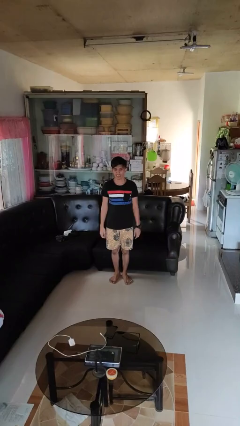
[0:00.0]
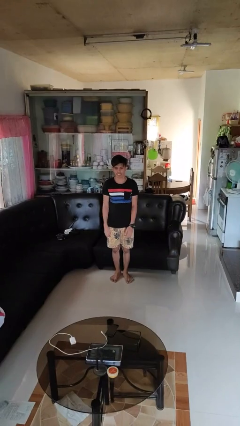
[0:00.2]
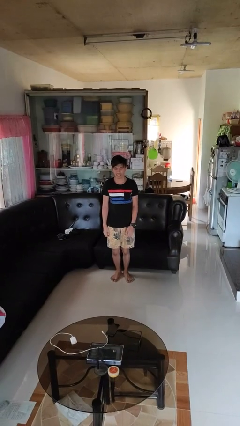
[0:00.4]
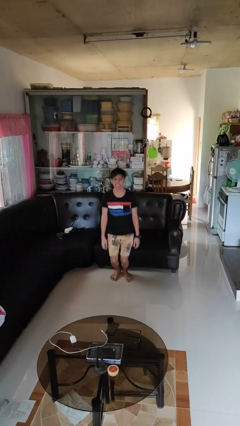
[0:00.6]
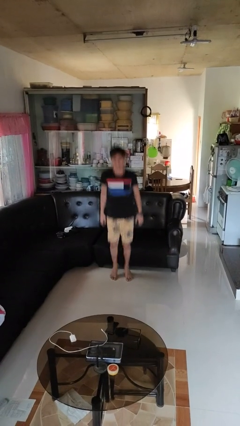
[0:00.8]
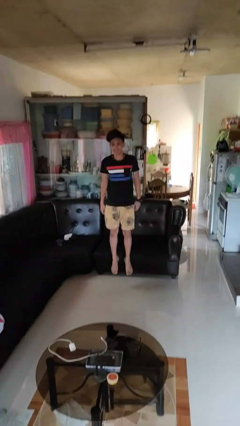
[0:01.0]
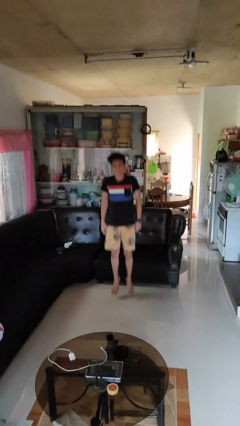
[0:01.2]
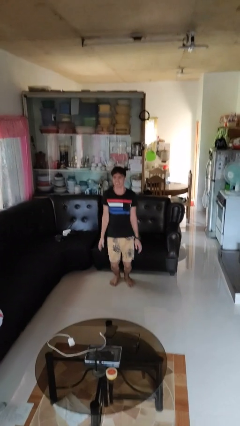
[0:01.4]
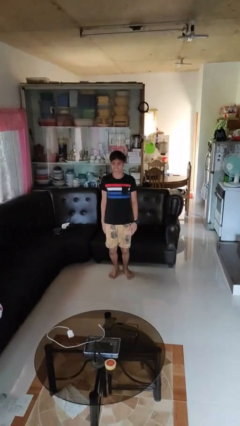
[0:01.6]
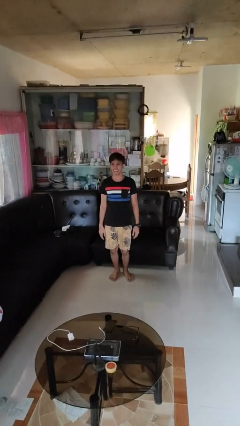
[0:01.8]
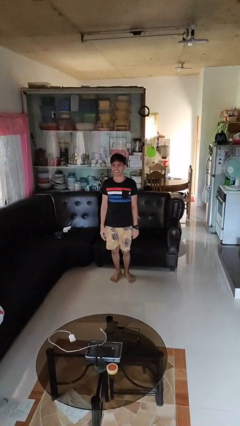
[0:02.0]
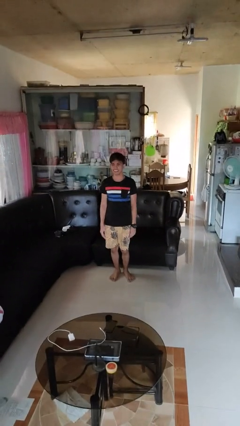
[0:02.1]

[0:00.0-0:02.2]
person jumps

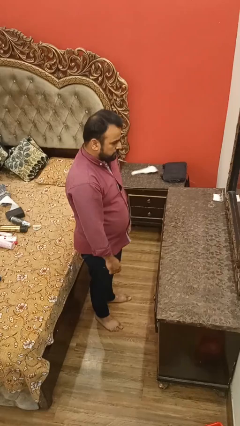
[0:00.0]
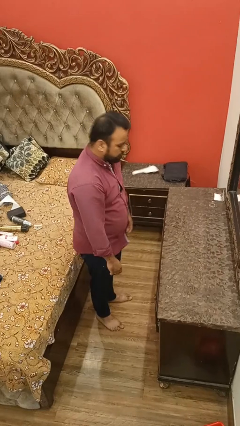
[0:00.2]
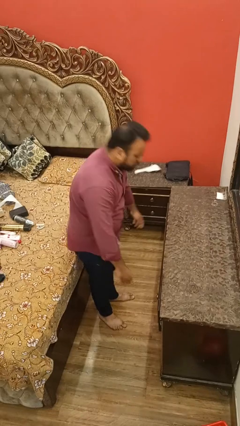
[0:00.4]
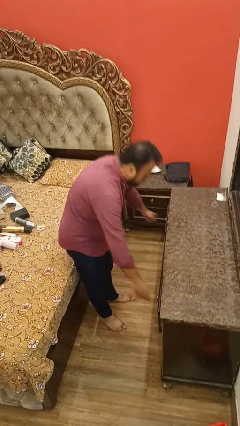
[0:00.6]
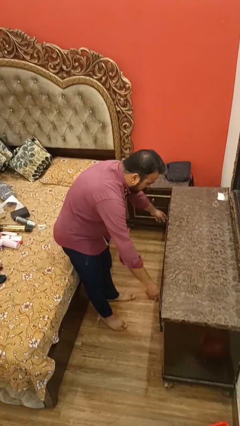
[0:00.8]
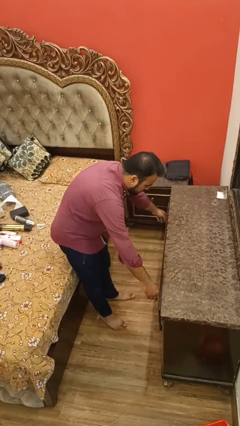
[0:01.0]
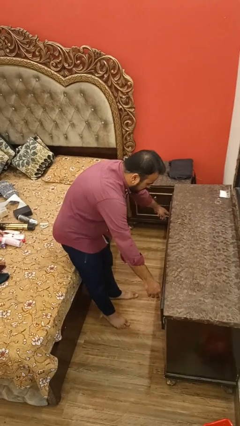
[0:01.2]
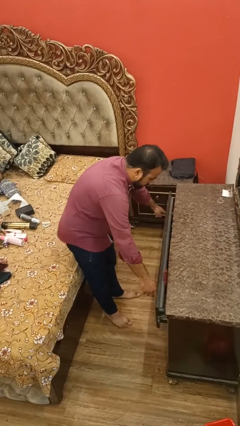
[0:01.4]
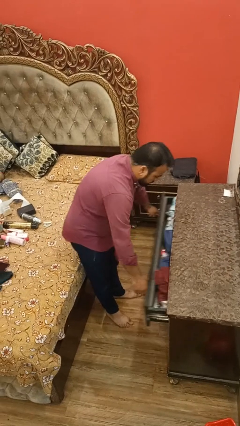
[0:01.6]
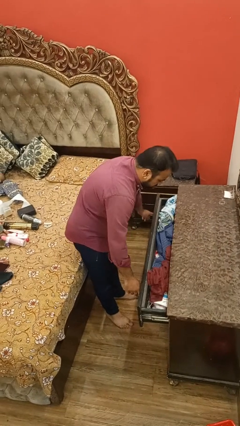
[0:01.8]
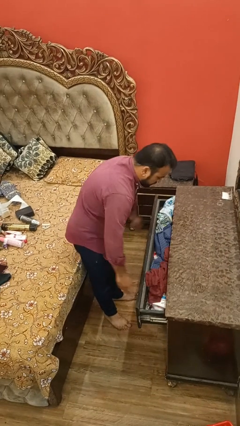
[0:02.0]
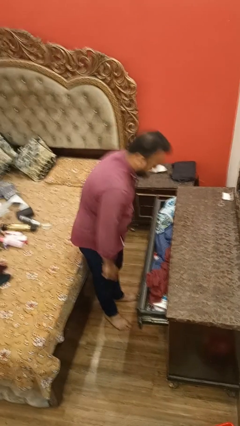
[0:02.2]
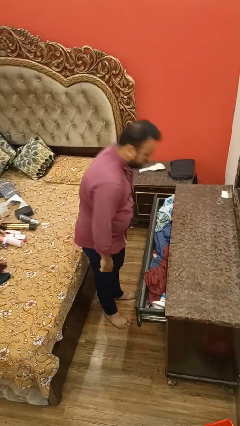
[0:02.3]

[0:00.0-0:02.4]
person opens dresser drawer

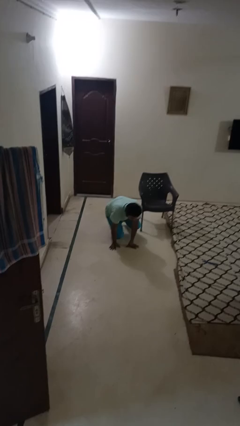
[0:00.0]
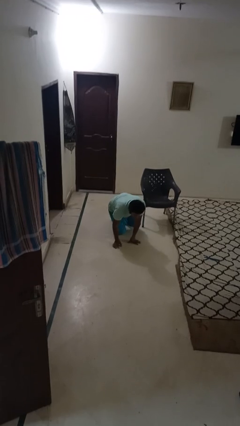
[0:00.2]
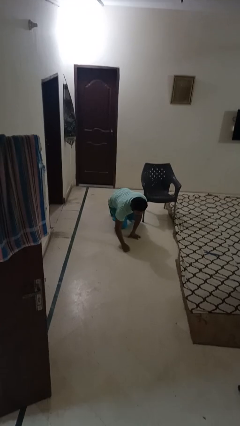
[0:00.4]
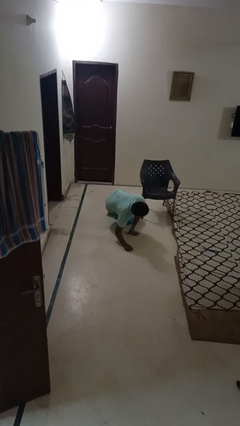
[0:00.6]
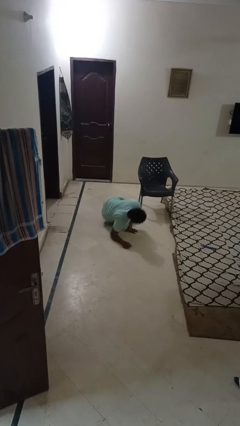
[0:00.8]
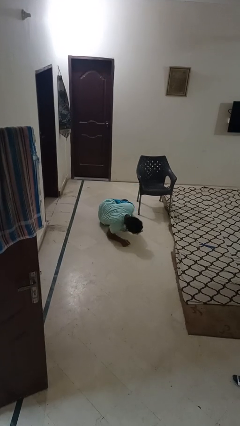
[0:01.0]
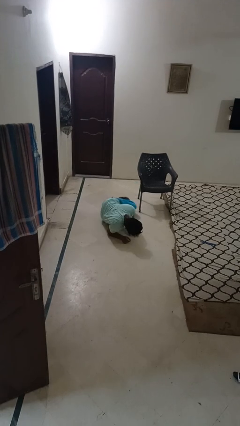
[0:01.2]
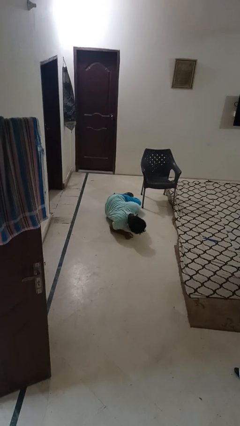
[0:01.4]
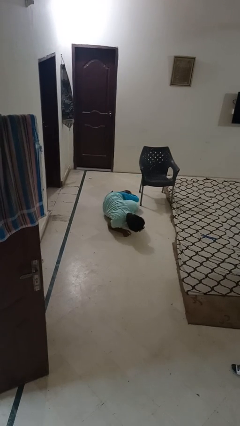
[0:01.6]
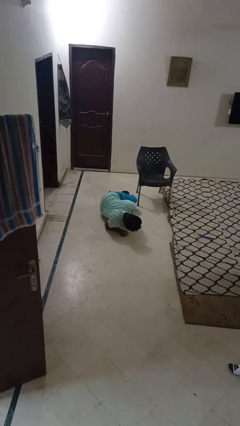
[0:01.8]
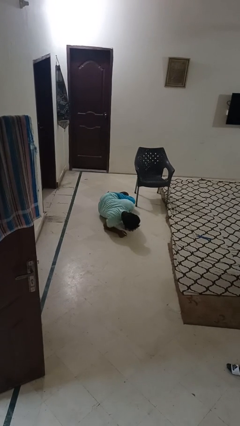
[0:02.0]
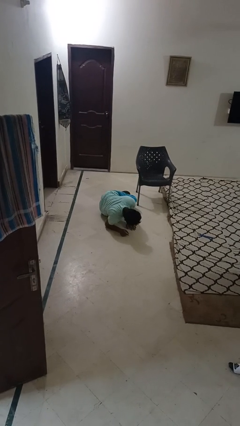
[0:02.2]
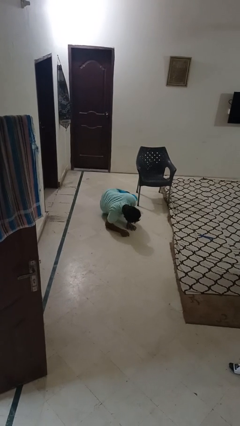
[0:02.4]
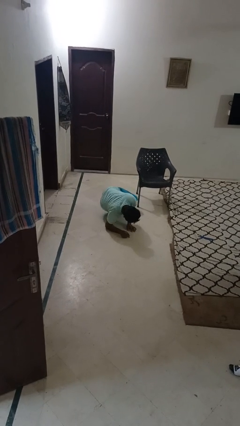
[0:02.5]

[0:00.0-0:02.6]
person lies down on floor

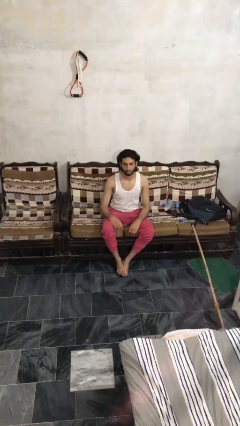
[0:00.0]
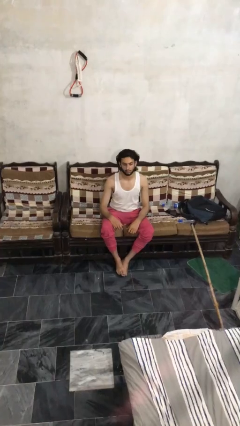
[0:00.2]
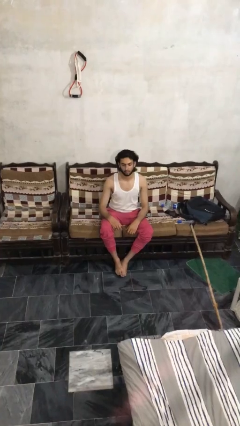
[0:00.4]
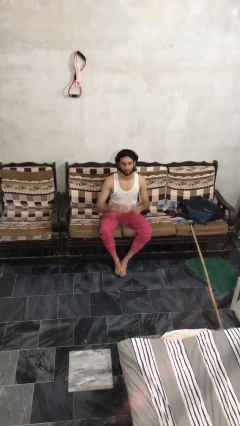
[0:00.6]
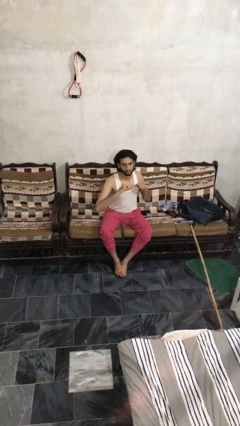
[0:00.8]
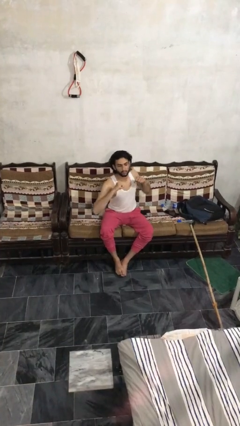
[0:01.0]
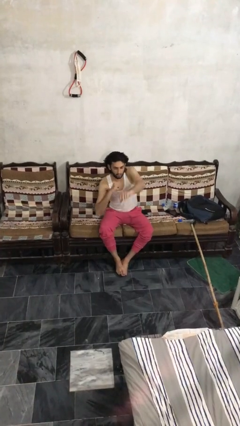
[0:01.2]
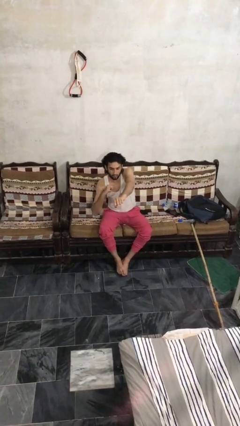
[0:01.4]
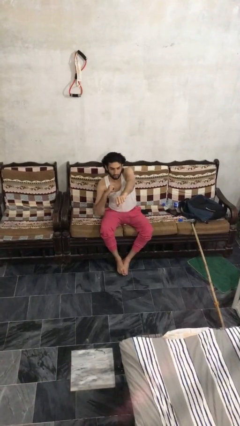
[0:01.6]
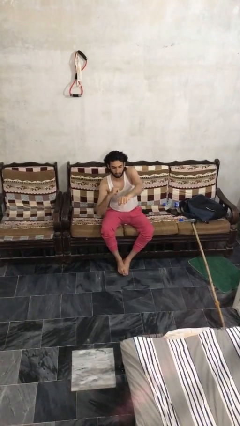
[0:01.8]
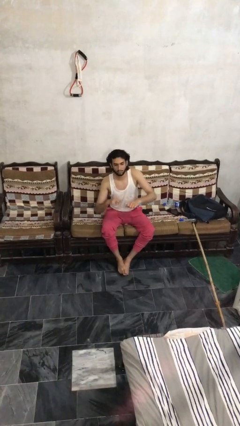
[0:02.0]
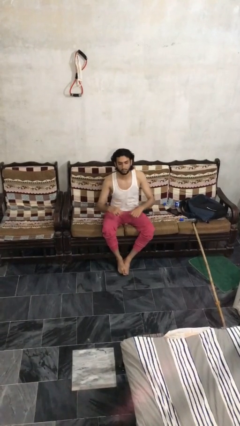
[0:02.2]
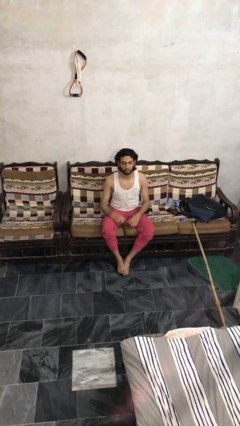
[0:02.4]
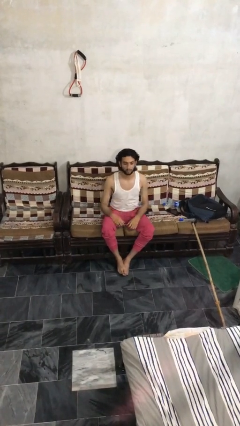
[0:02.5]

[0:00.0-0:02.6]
person punches

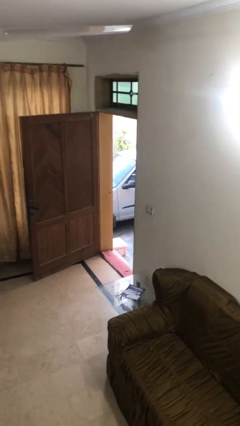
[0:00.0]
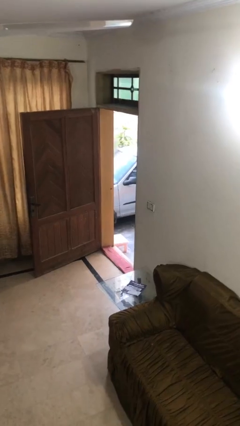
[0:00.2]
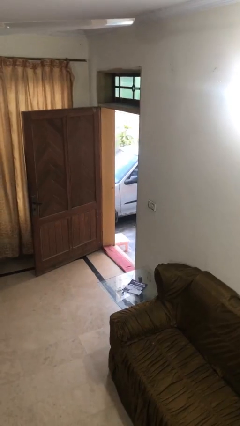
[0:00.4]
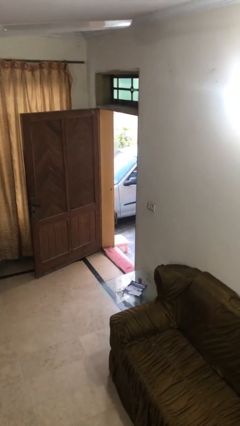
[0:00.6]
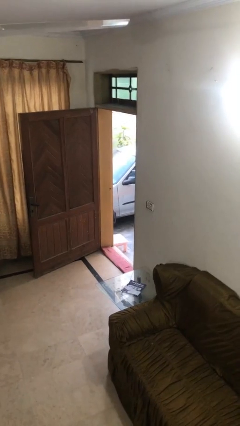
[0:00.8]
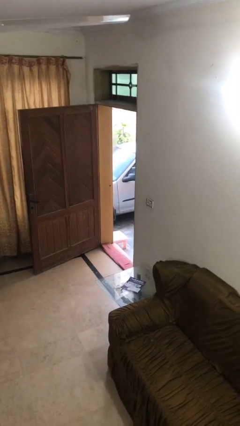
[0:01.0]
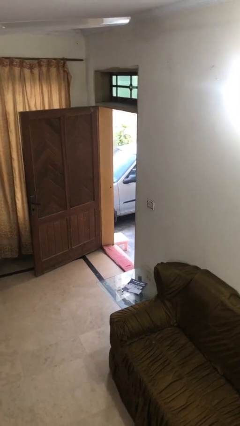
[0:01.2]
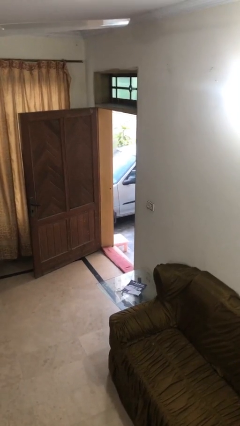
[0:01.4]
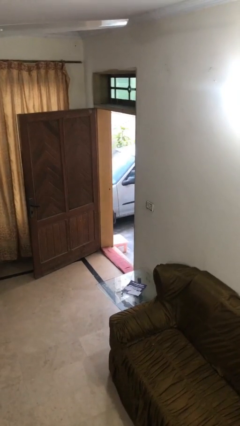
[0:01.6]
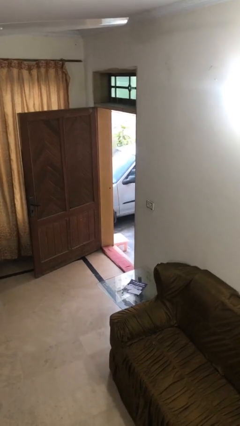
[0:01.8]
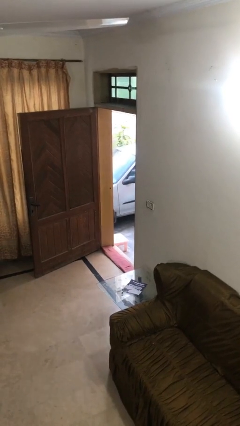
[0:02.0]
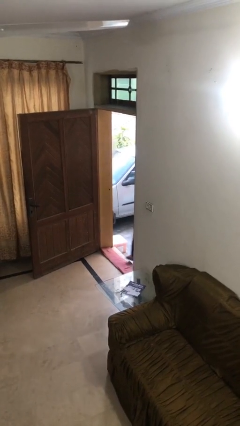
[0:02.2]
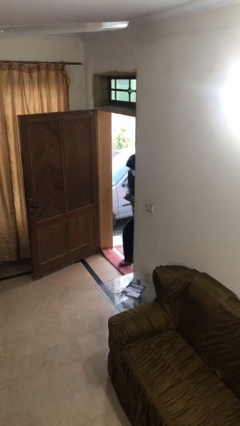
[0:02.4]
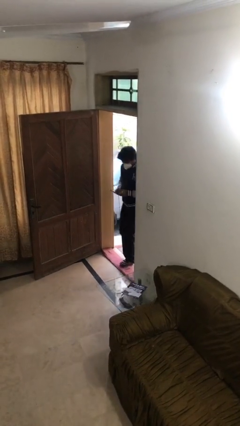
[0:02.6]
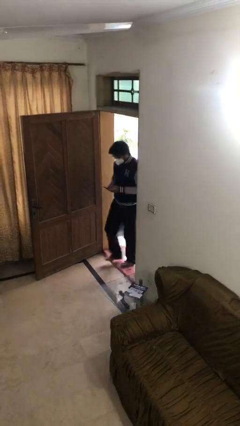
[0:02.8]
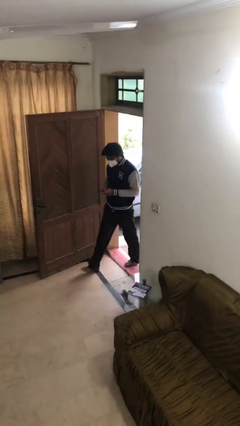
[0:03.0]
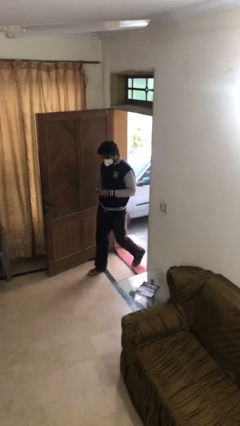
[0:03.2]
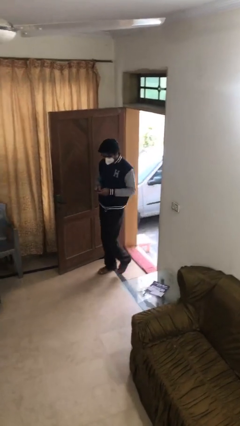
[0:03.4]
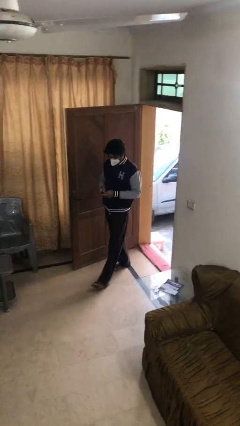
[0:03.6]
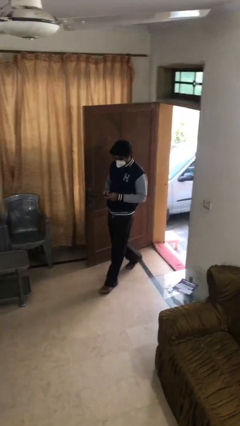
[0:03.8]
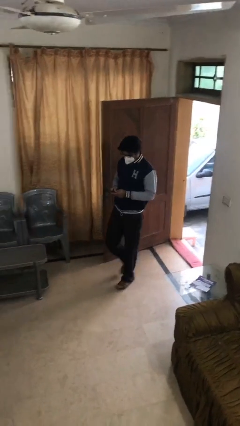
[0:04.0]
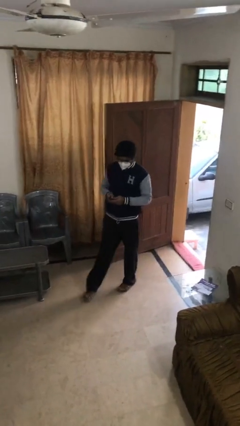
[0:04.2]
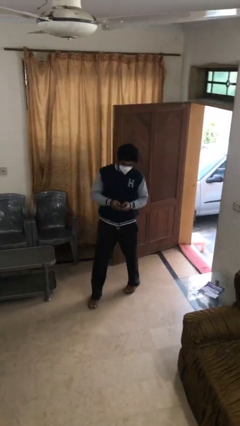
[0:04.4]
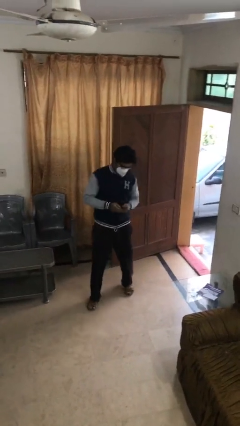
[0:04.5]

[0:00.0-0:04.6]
person enters scene through structure

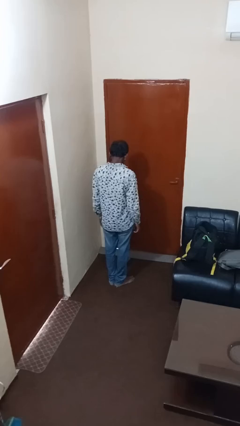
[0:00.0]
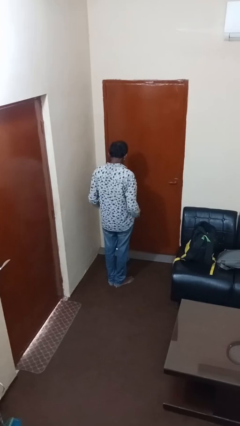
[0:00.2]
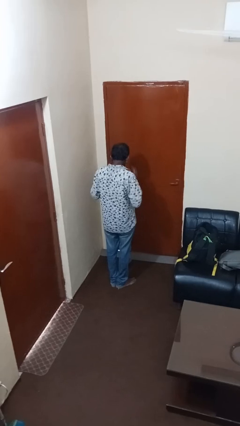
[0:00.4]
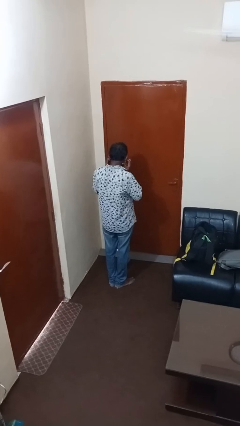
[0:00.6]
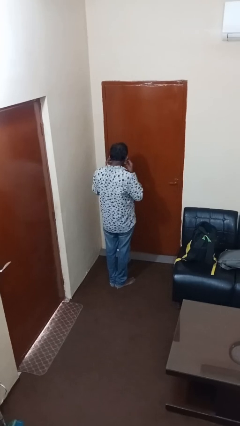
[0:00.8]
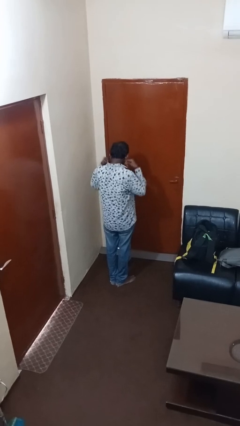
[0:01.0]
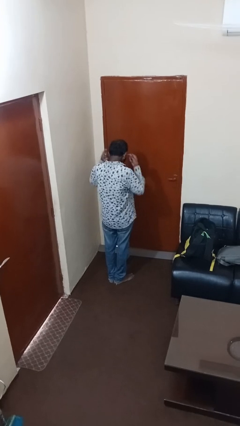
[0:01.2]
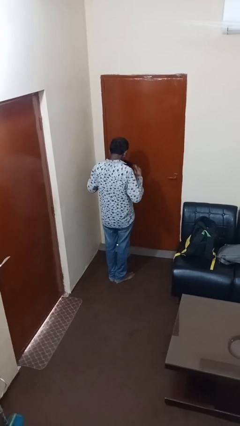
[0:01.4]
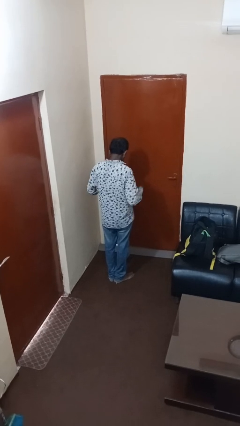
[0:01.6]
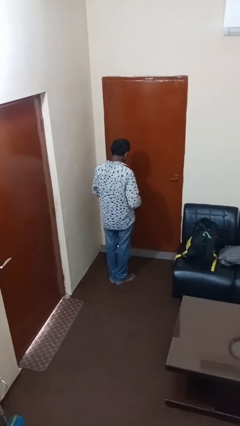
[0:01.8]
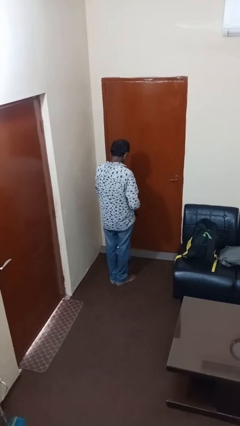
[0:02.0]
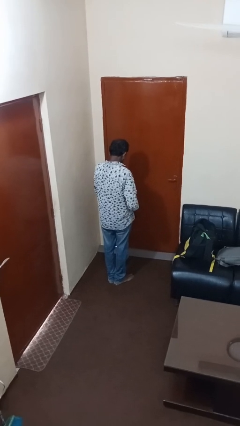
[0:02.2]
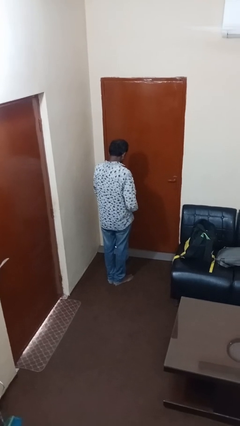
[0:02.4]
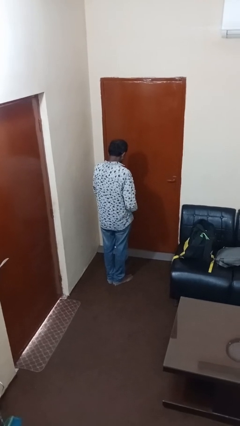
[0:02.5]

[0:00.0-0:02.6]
person takes off facemask
